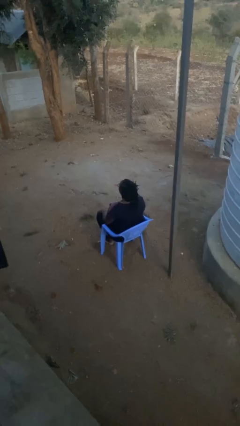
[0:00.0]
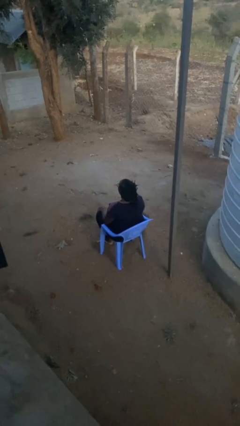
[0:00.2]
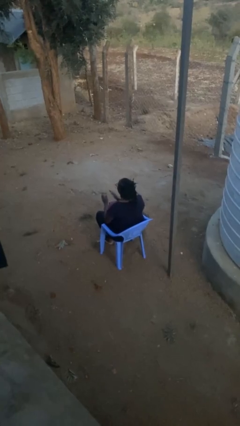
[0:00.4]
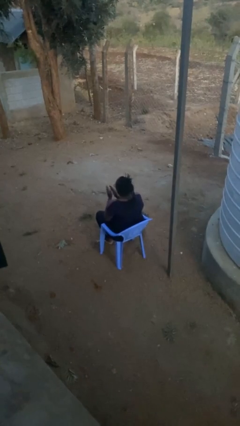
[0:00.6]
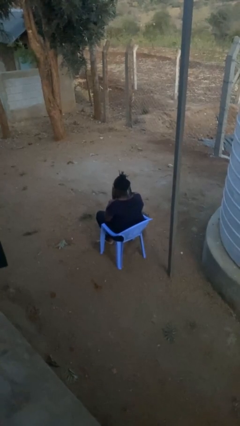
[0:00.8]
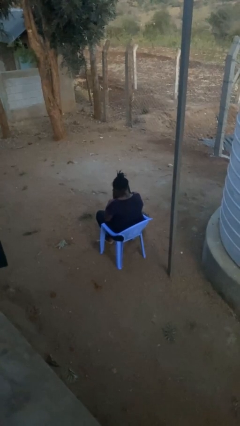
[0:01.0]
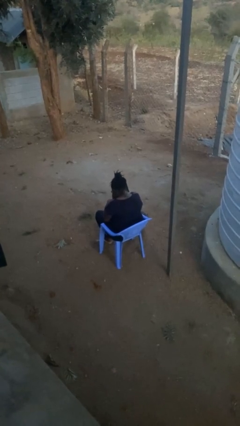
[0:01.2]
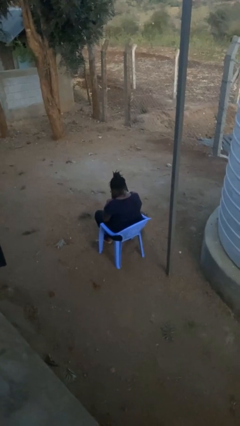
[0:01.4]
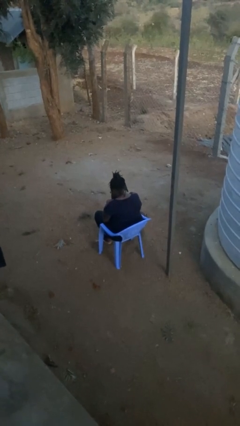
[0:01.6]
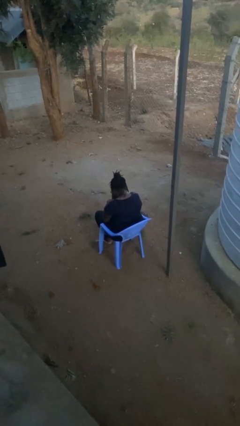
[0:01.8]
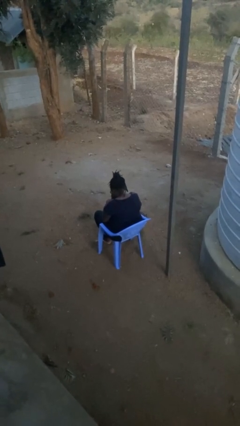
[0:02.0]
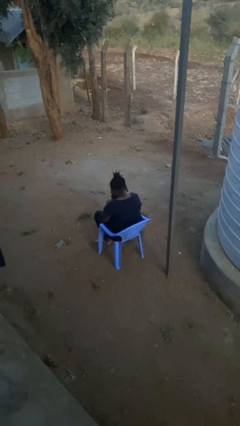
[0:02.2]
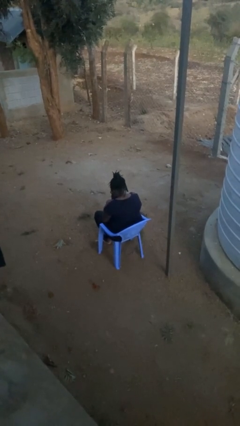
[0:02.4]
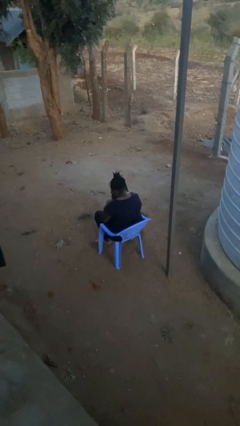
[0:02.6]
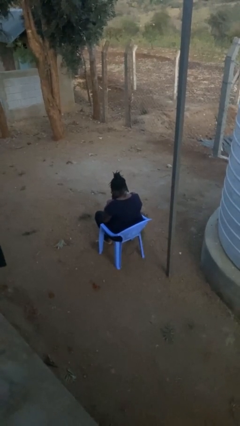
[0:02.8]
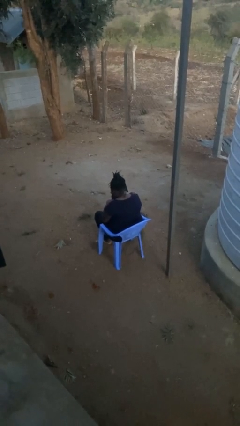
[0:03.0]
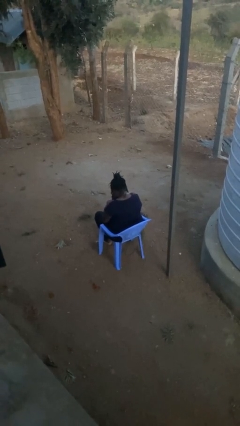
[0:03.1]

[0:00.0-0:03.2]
person prays

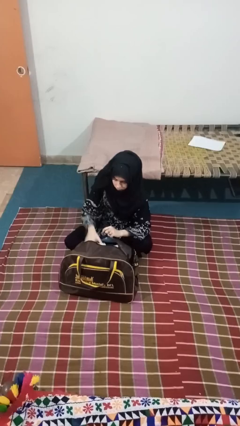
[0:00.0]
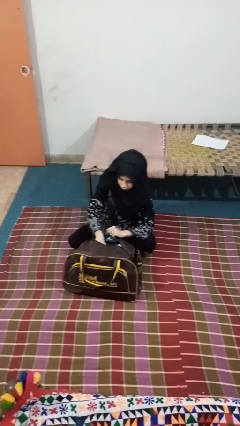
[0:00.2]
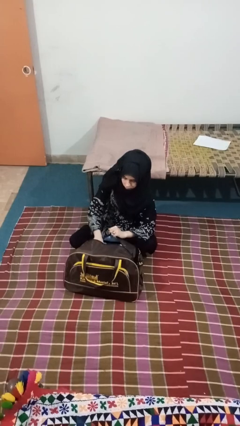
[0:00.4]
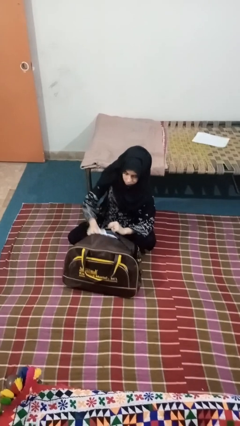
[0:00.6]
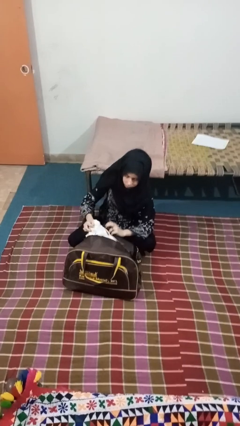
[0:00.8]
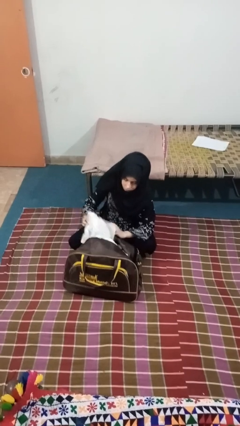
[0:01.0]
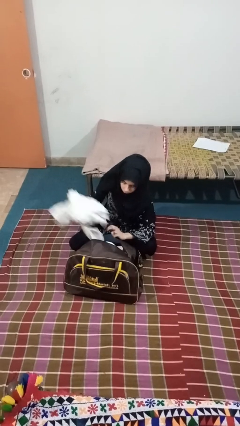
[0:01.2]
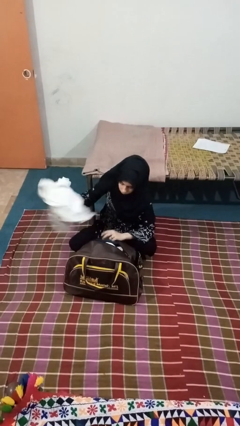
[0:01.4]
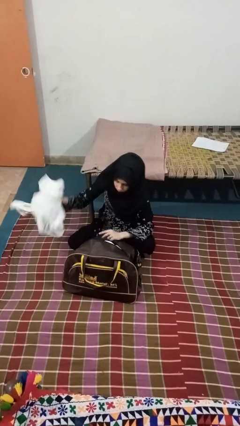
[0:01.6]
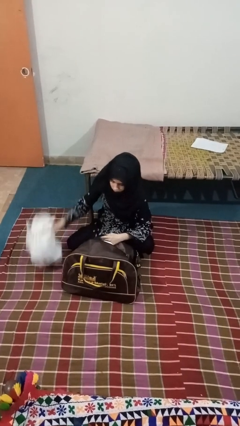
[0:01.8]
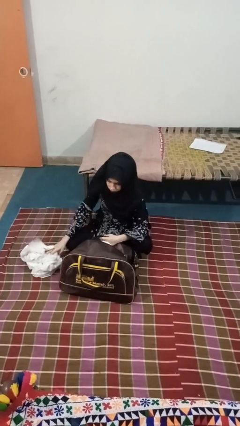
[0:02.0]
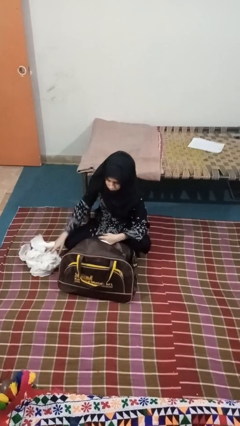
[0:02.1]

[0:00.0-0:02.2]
person unloads clothes from suitcase

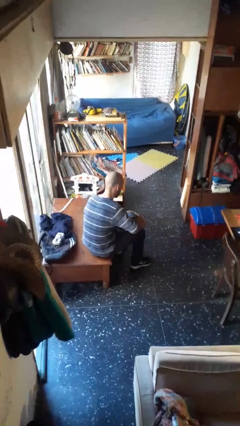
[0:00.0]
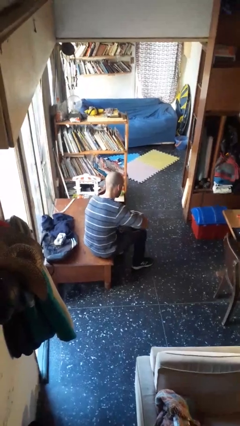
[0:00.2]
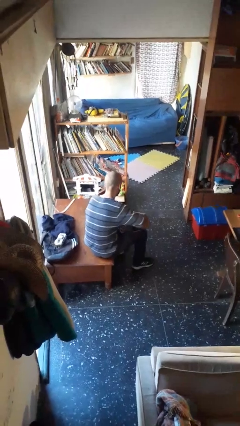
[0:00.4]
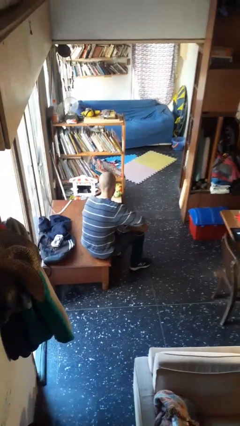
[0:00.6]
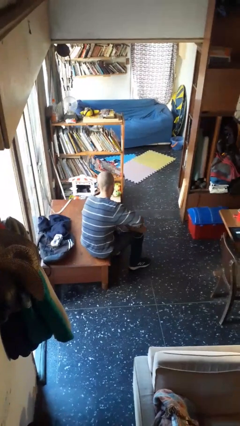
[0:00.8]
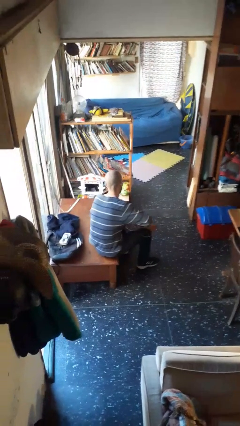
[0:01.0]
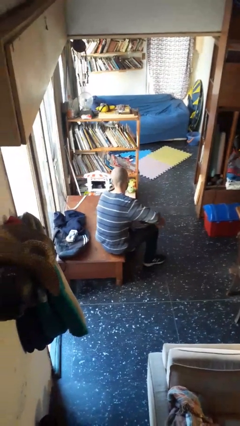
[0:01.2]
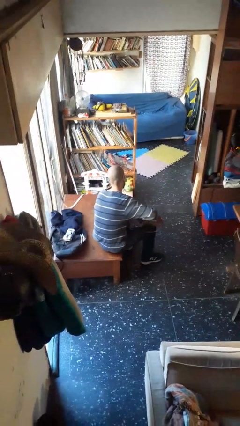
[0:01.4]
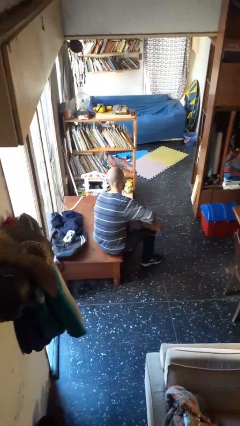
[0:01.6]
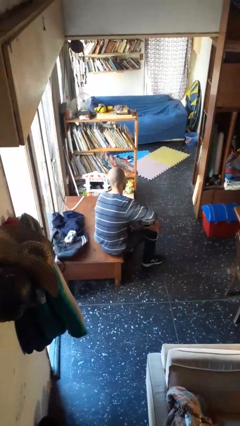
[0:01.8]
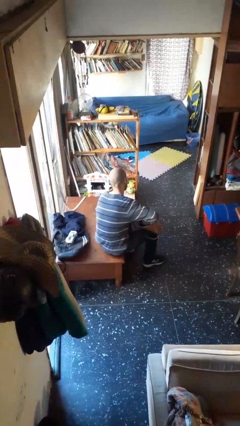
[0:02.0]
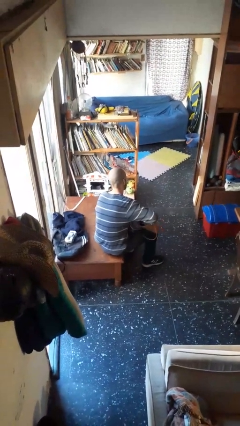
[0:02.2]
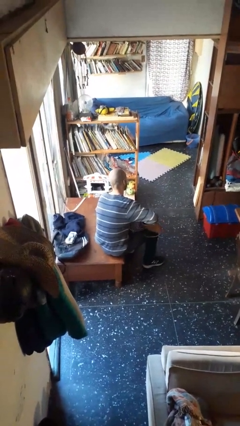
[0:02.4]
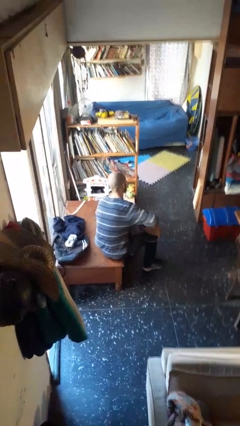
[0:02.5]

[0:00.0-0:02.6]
person searches in purse

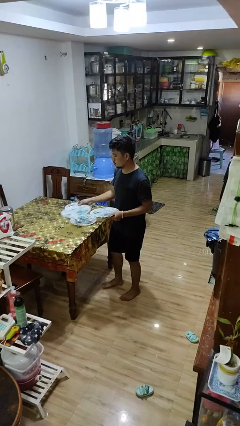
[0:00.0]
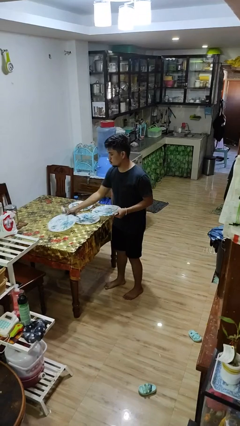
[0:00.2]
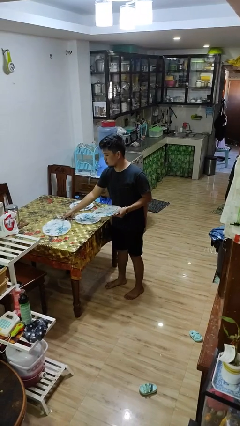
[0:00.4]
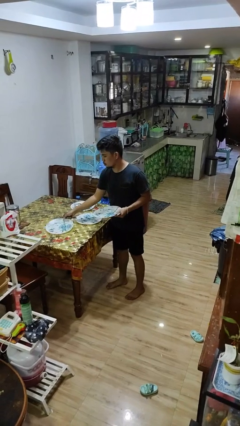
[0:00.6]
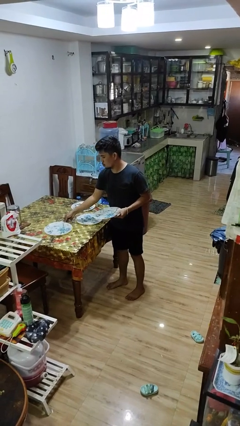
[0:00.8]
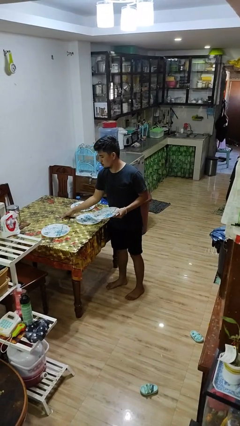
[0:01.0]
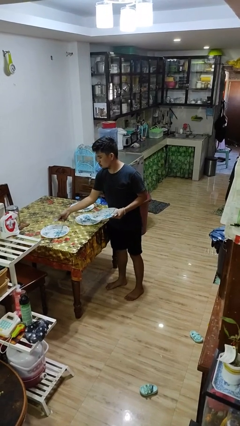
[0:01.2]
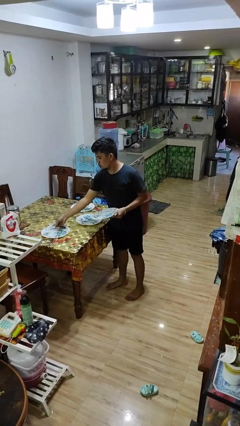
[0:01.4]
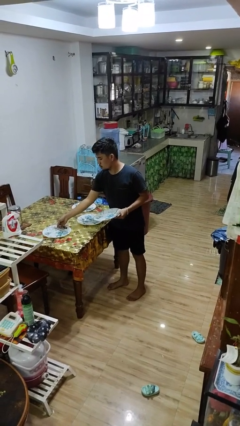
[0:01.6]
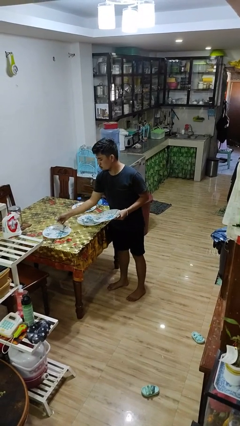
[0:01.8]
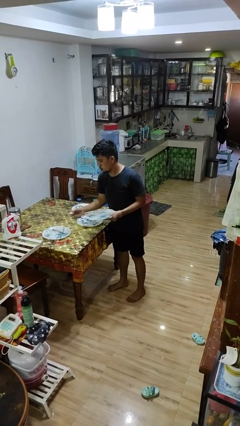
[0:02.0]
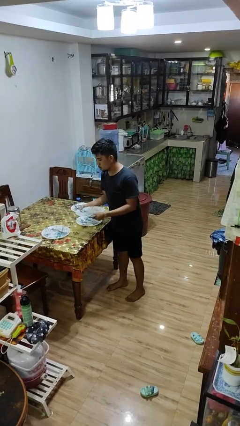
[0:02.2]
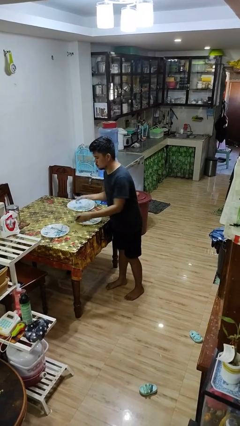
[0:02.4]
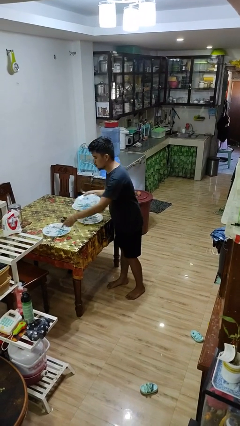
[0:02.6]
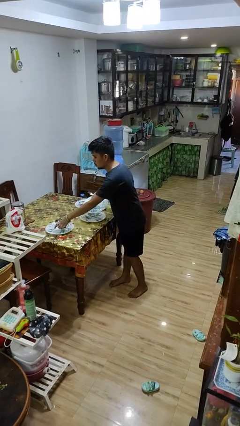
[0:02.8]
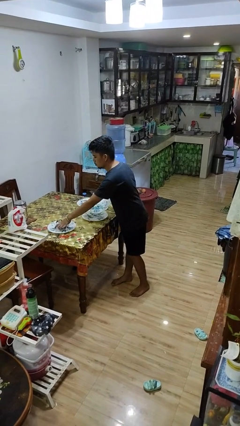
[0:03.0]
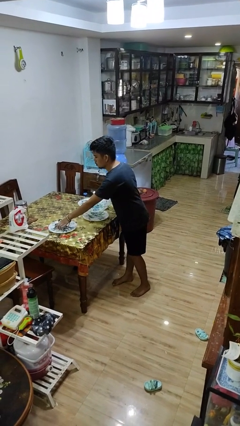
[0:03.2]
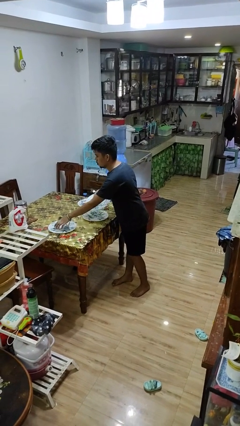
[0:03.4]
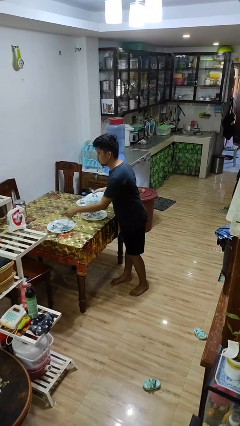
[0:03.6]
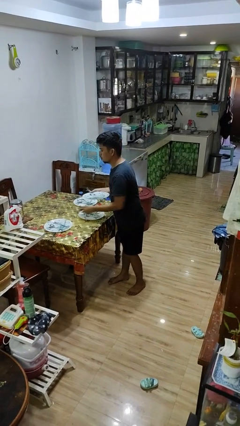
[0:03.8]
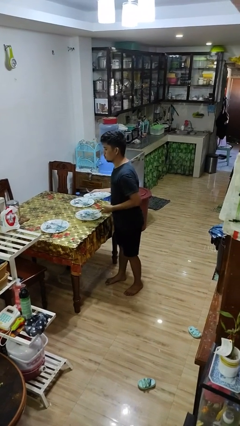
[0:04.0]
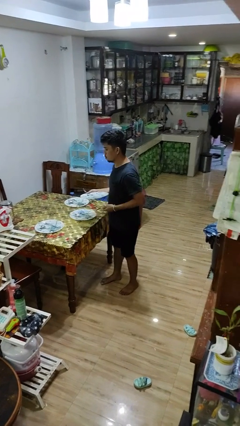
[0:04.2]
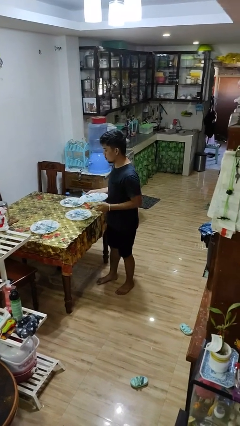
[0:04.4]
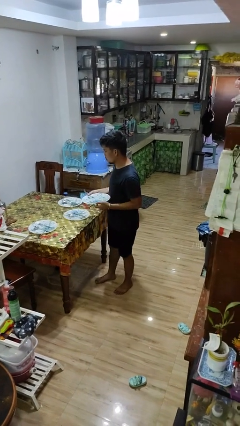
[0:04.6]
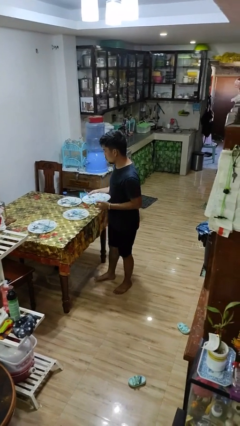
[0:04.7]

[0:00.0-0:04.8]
person sets table

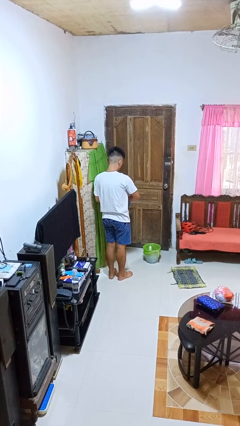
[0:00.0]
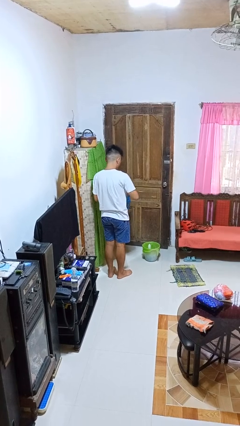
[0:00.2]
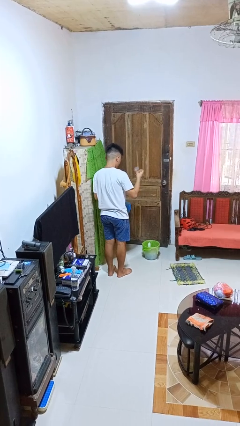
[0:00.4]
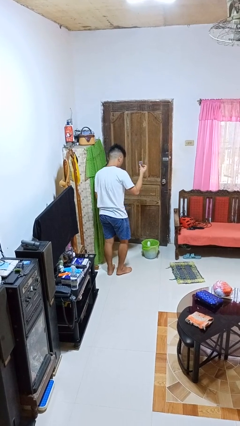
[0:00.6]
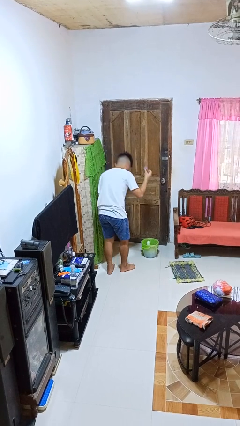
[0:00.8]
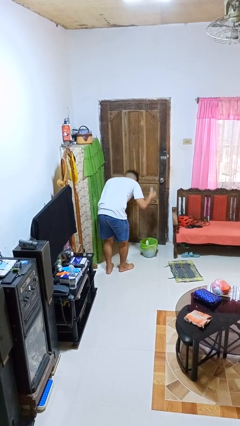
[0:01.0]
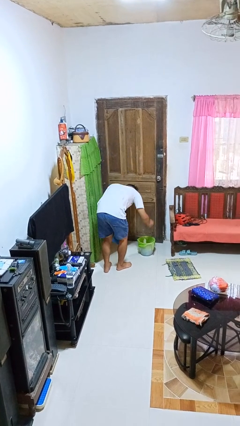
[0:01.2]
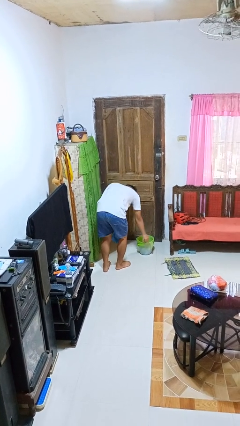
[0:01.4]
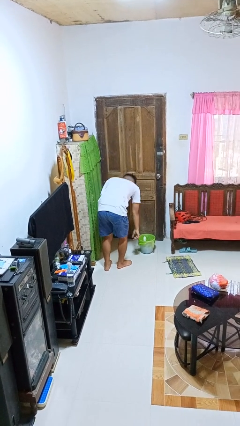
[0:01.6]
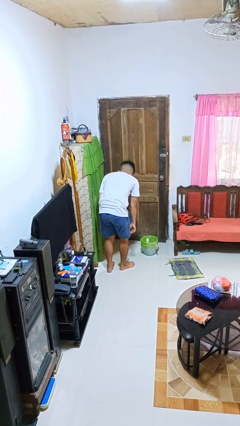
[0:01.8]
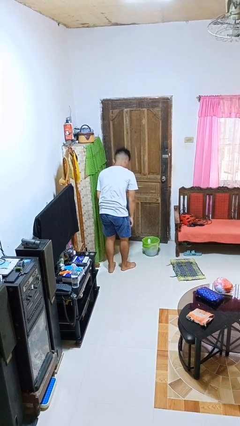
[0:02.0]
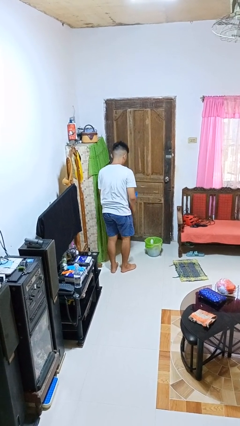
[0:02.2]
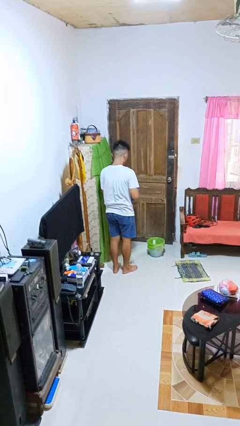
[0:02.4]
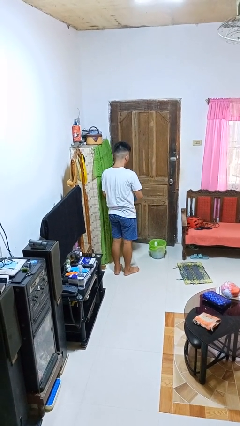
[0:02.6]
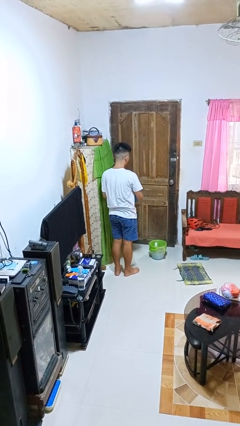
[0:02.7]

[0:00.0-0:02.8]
person discards trash

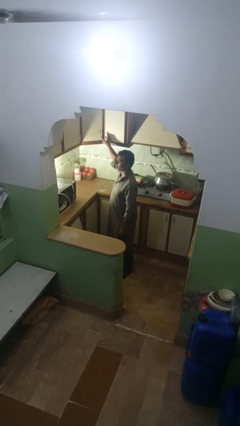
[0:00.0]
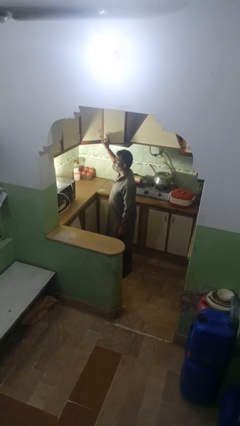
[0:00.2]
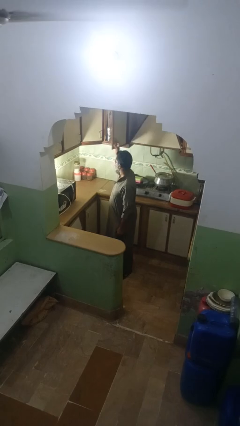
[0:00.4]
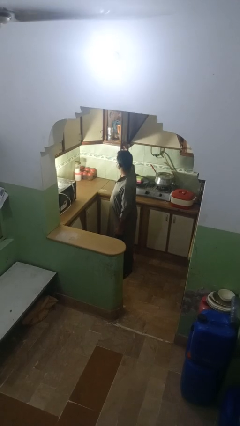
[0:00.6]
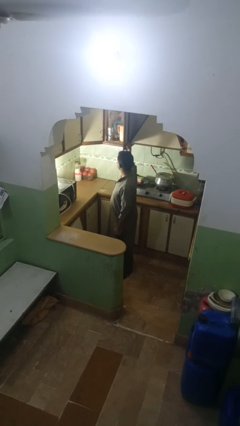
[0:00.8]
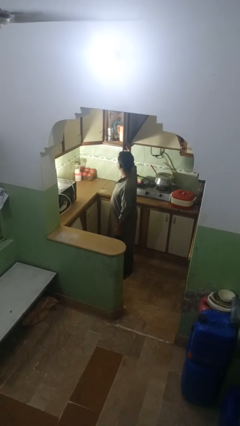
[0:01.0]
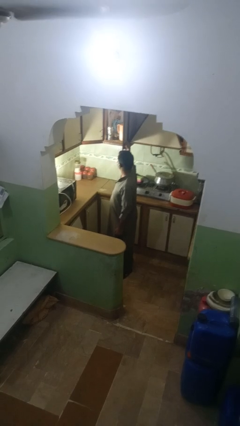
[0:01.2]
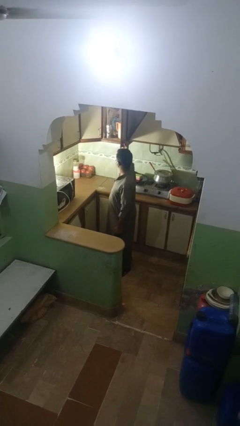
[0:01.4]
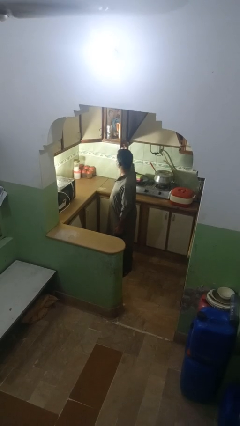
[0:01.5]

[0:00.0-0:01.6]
person opens kitchen drawer

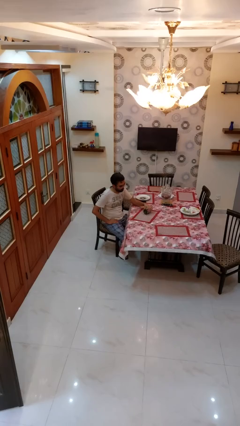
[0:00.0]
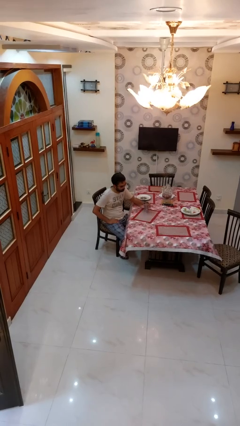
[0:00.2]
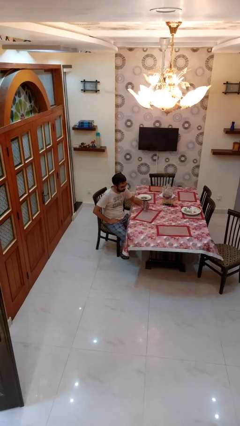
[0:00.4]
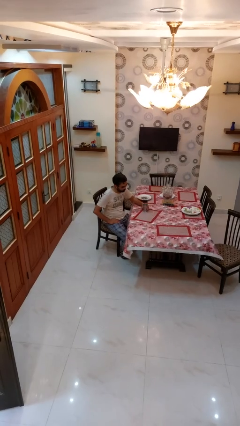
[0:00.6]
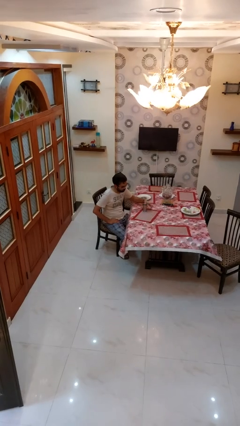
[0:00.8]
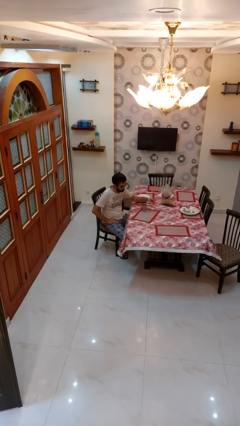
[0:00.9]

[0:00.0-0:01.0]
person sets upright glass
